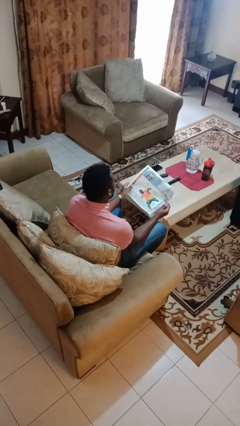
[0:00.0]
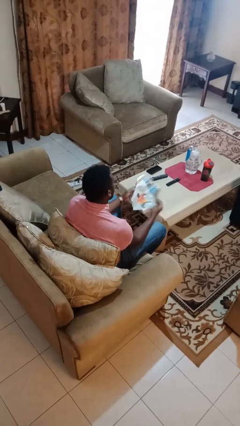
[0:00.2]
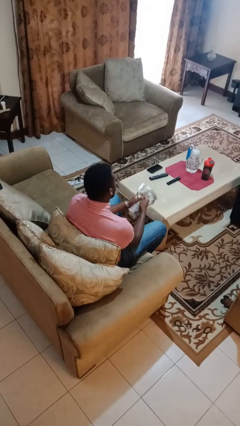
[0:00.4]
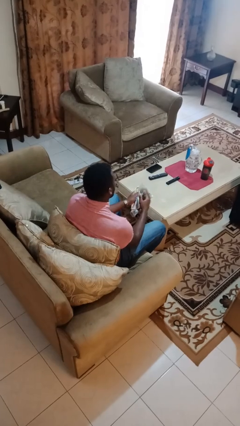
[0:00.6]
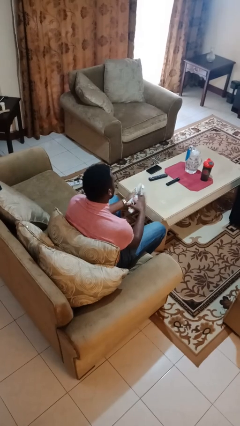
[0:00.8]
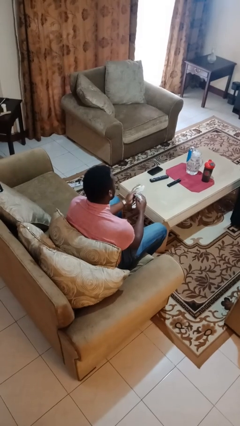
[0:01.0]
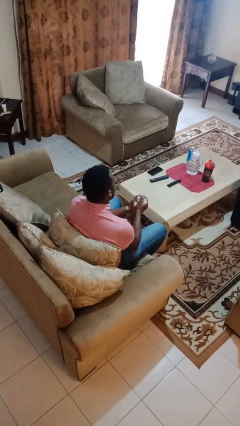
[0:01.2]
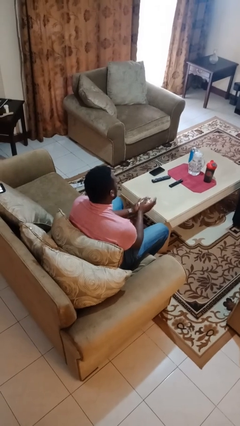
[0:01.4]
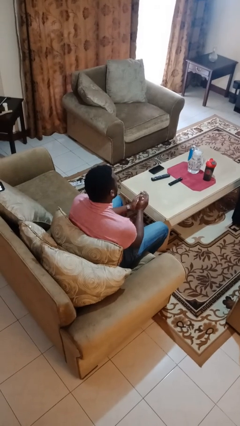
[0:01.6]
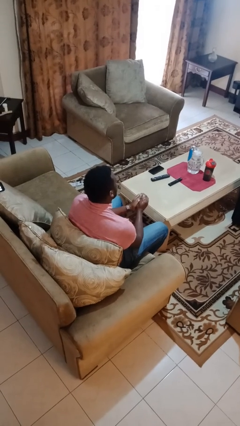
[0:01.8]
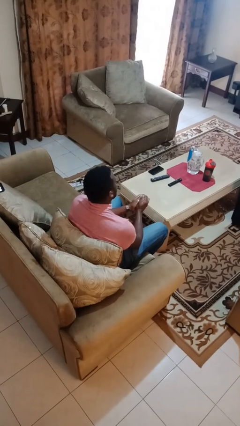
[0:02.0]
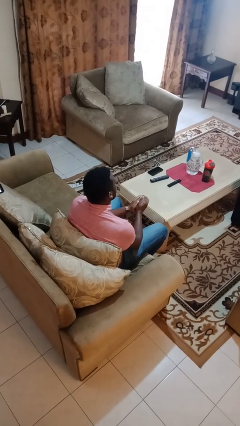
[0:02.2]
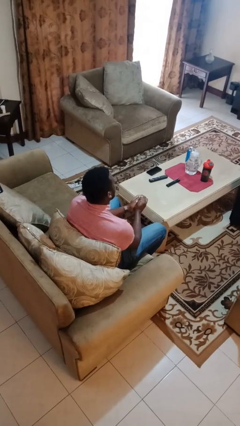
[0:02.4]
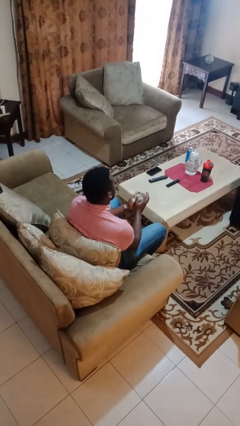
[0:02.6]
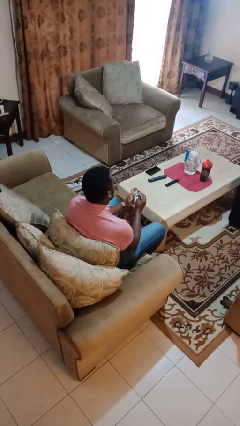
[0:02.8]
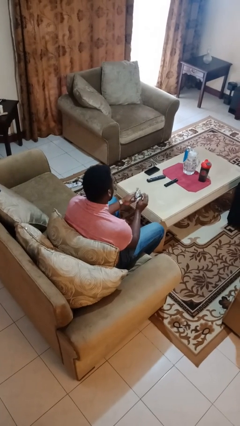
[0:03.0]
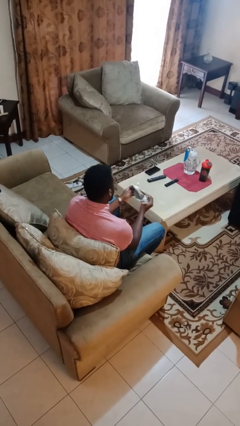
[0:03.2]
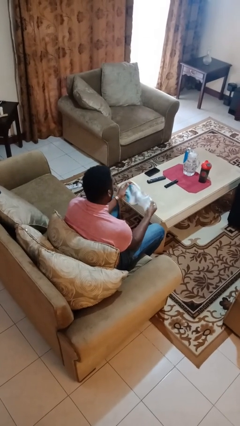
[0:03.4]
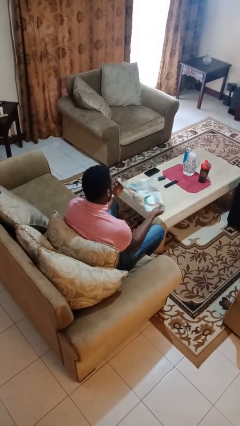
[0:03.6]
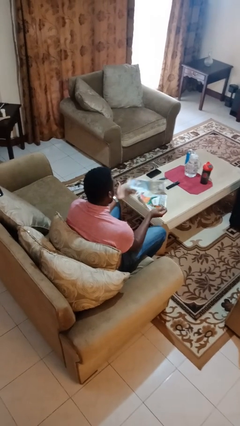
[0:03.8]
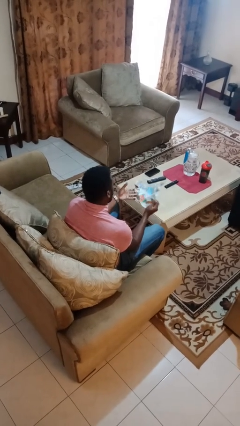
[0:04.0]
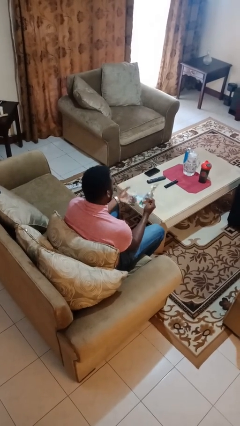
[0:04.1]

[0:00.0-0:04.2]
person crumples paper

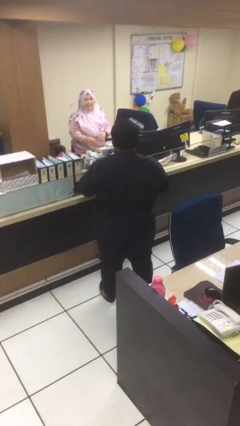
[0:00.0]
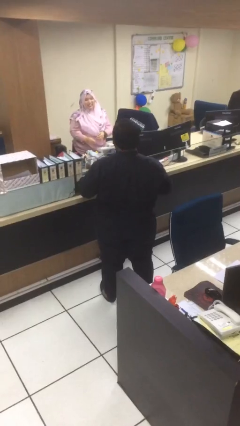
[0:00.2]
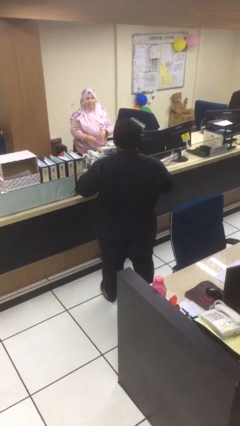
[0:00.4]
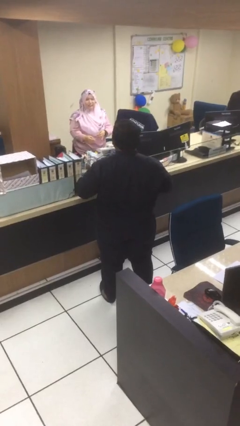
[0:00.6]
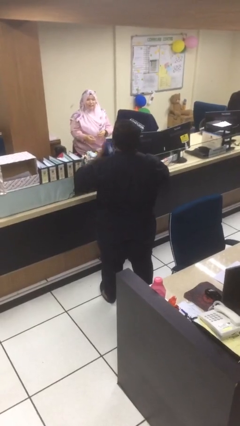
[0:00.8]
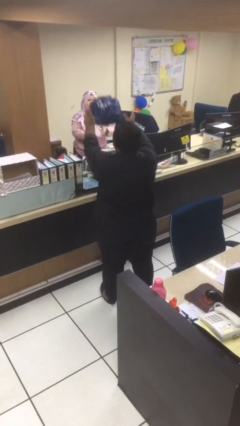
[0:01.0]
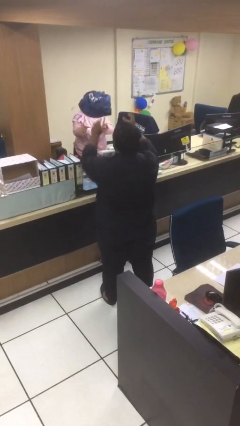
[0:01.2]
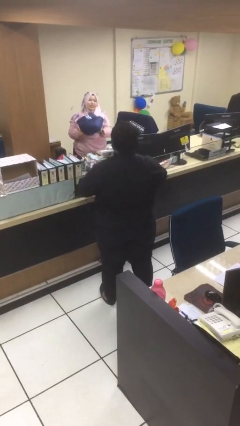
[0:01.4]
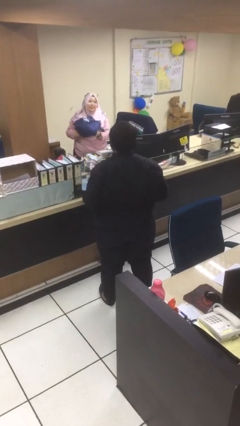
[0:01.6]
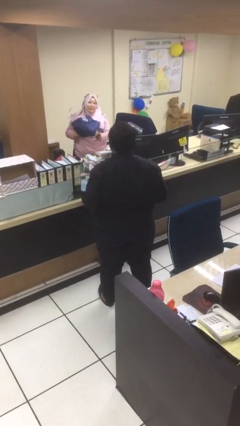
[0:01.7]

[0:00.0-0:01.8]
person throws object to person

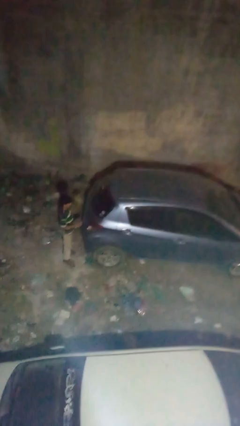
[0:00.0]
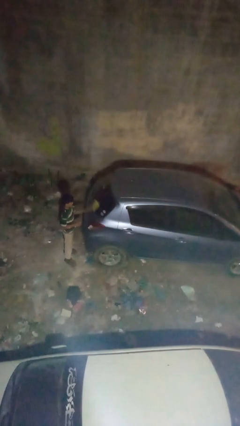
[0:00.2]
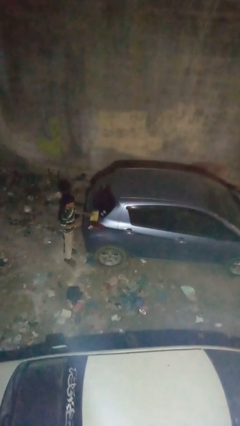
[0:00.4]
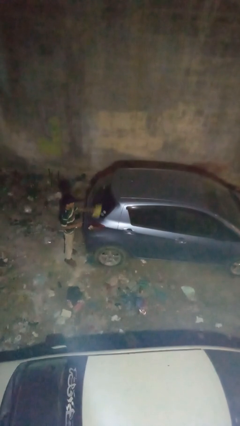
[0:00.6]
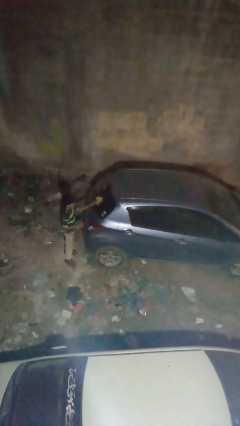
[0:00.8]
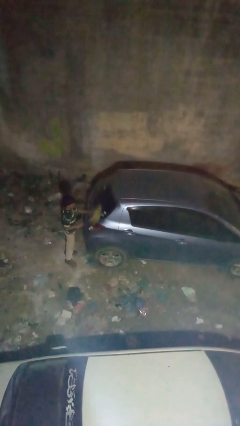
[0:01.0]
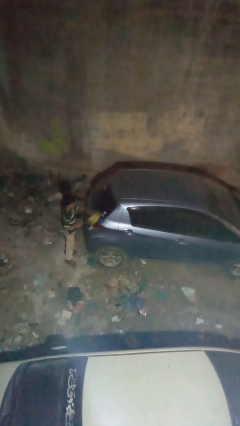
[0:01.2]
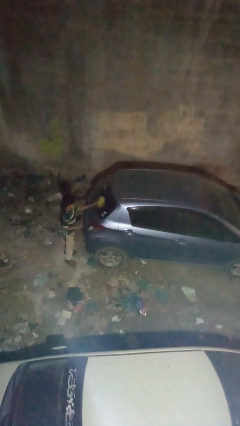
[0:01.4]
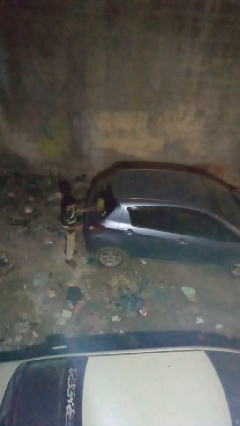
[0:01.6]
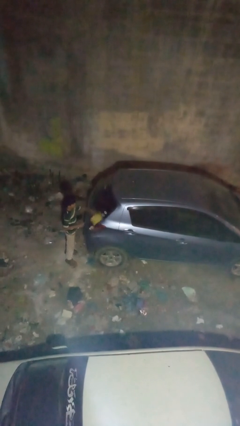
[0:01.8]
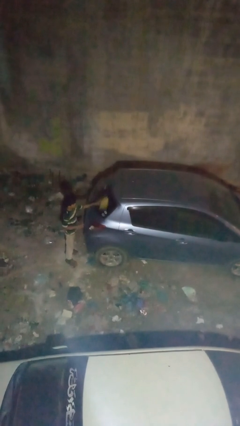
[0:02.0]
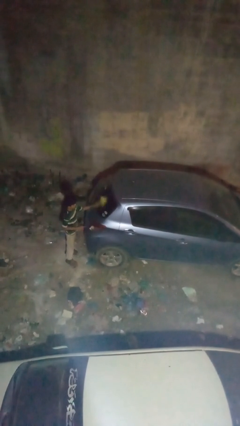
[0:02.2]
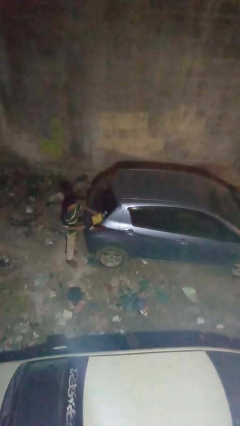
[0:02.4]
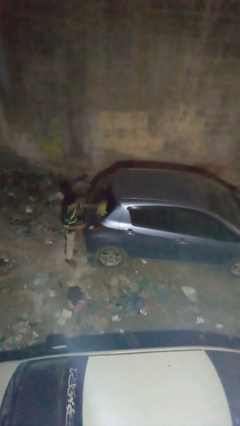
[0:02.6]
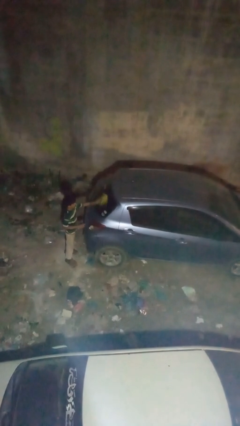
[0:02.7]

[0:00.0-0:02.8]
person polishes car with rag

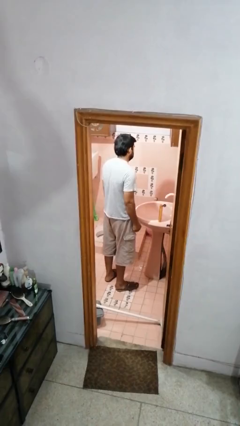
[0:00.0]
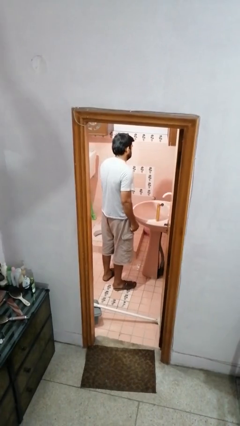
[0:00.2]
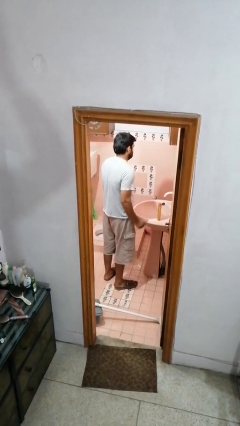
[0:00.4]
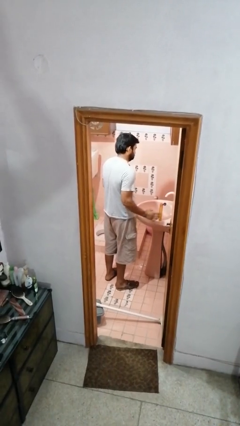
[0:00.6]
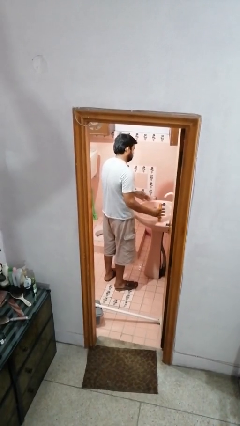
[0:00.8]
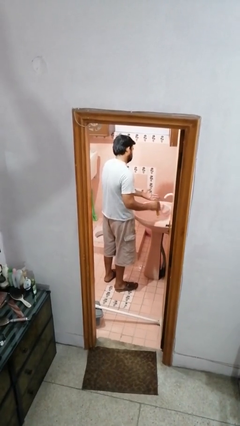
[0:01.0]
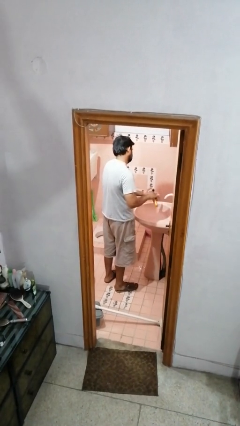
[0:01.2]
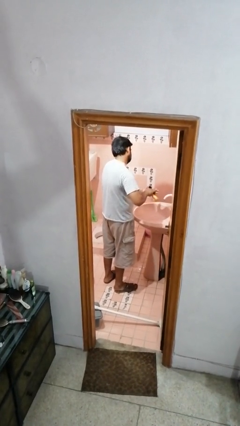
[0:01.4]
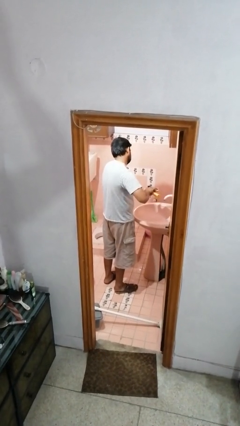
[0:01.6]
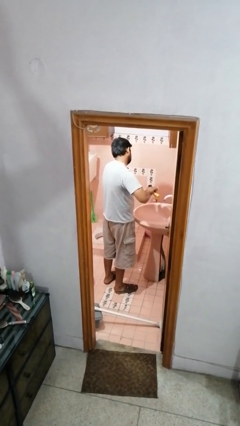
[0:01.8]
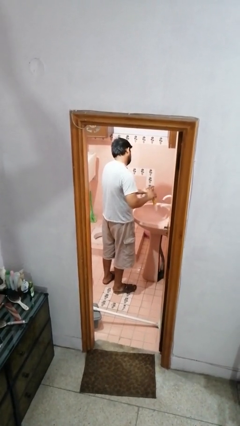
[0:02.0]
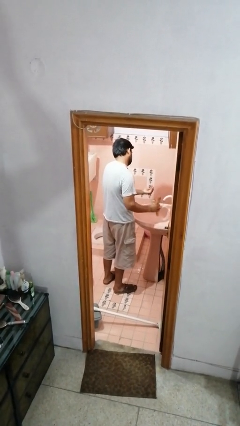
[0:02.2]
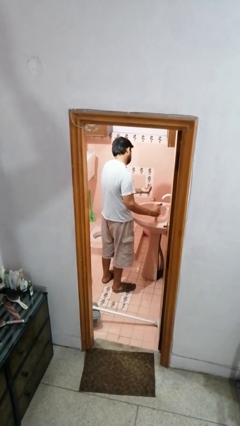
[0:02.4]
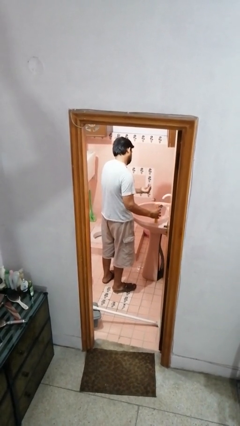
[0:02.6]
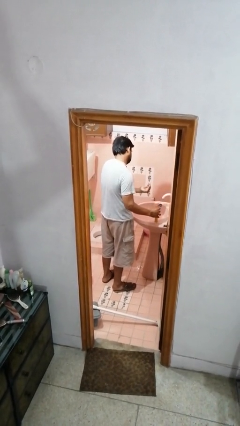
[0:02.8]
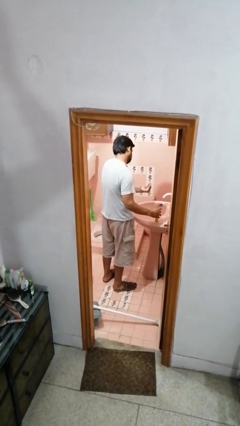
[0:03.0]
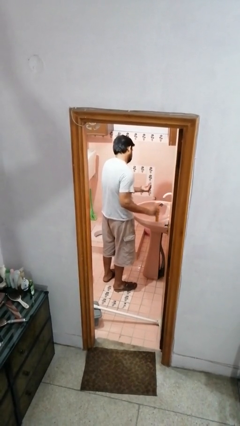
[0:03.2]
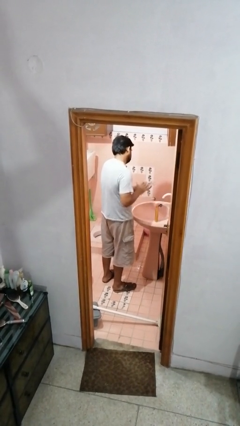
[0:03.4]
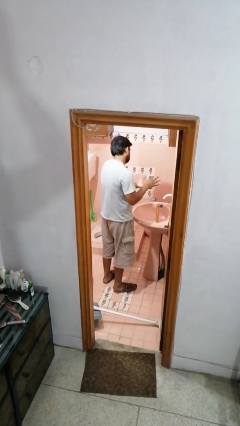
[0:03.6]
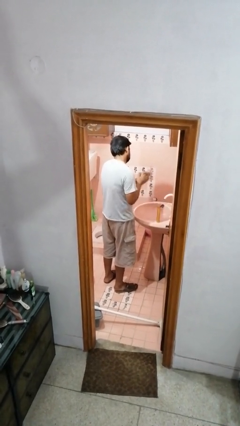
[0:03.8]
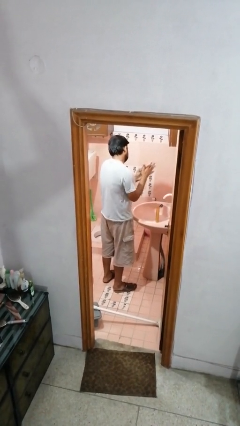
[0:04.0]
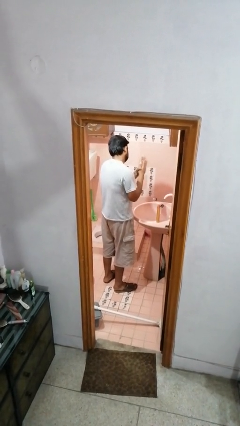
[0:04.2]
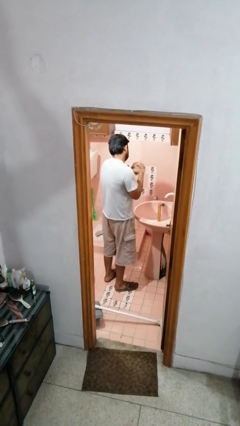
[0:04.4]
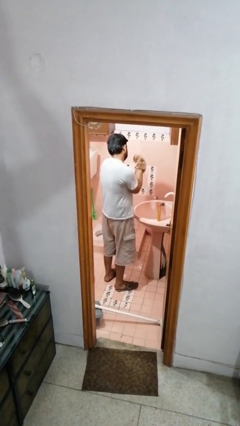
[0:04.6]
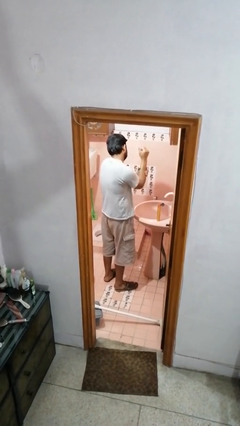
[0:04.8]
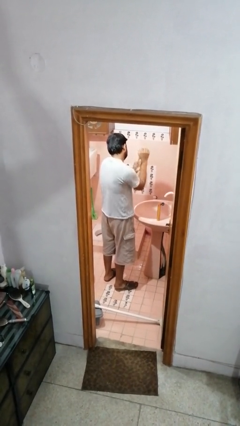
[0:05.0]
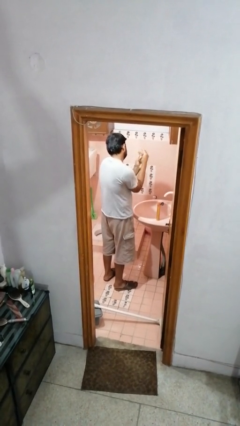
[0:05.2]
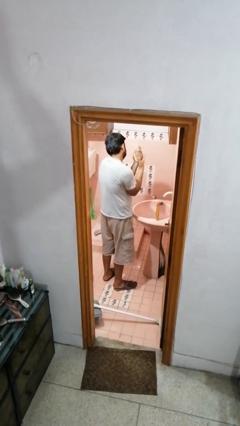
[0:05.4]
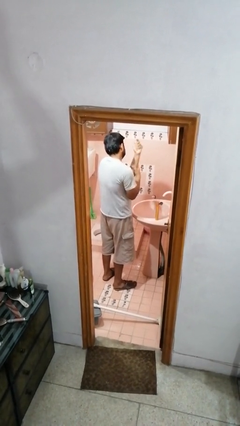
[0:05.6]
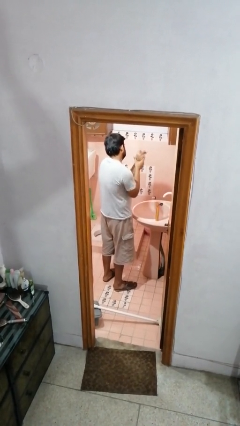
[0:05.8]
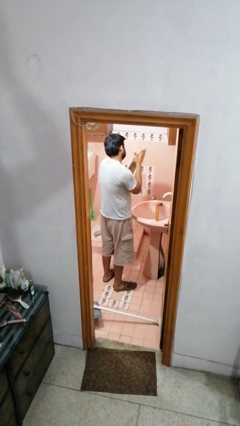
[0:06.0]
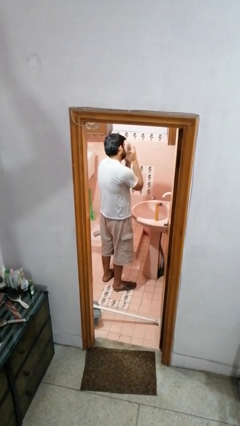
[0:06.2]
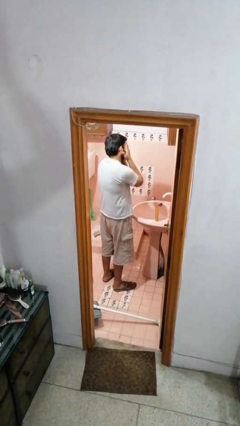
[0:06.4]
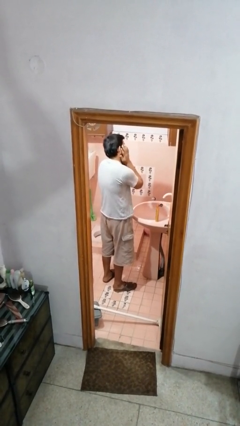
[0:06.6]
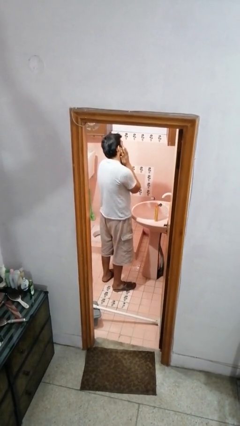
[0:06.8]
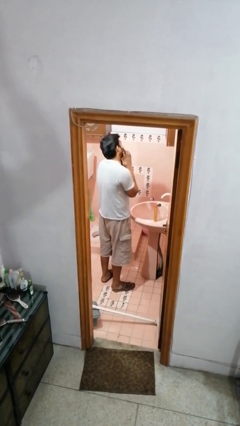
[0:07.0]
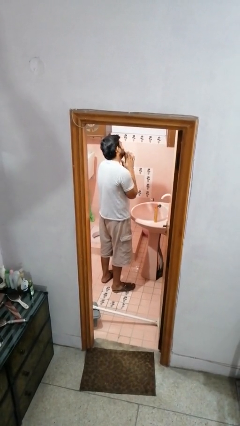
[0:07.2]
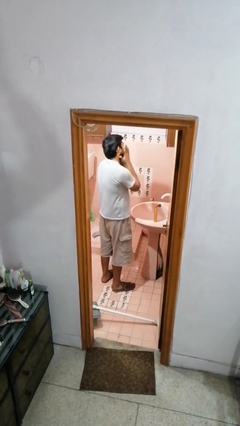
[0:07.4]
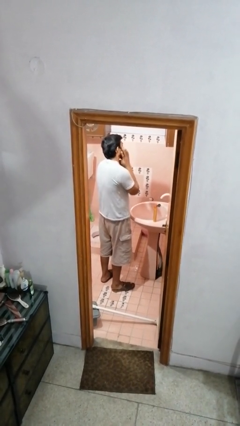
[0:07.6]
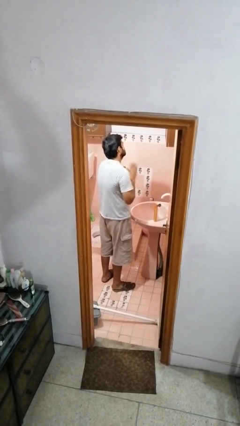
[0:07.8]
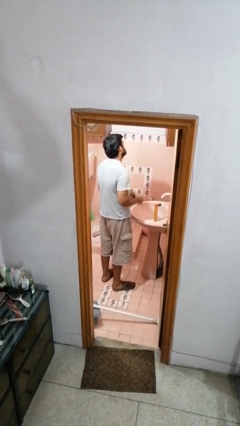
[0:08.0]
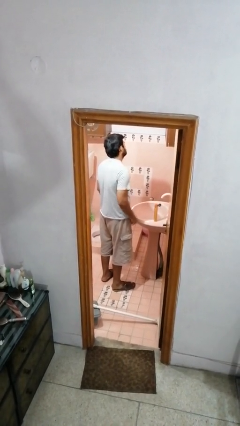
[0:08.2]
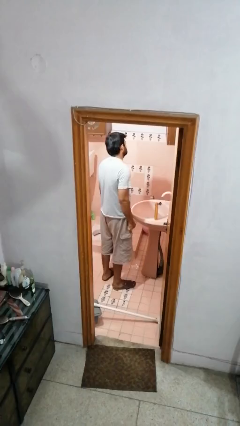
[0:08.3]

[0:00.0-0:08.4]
person applies facial moisturizer

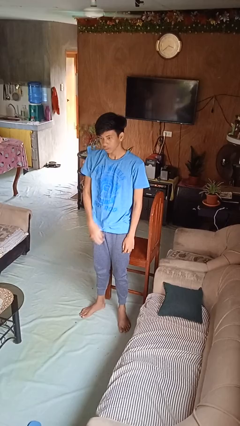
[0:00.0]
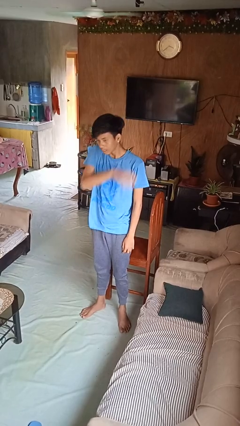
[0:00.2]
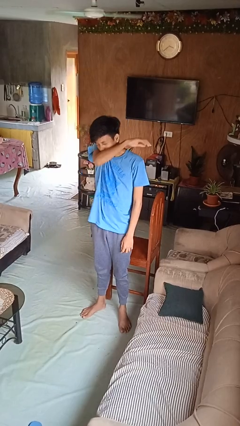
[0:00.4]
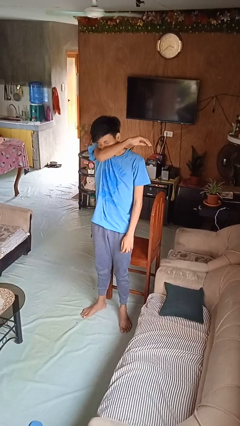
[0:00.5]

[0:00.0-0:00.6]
person sneezes into arm
